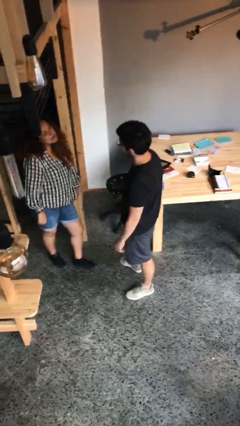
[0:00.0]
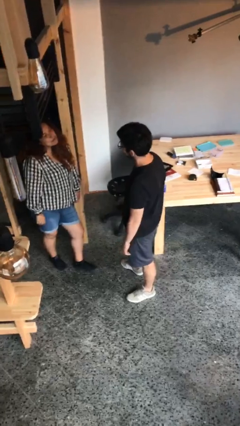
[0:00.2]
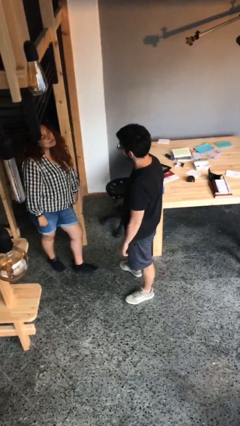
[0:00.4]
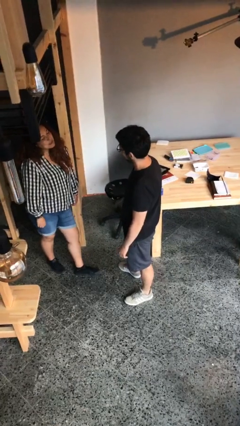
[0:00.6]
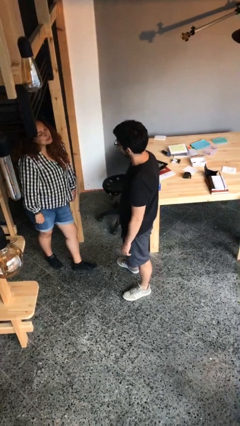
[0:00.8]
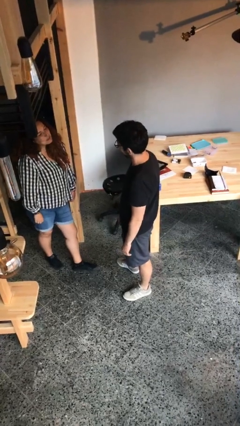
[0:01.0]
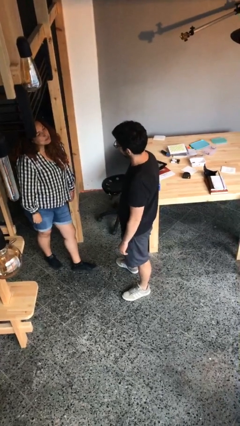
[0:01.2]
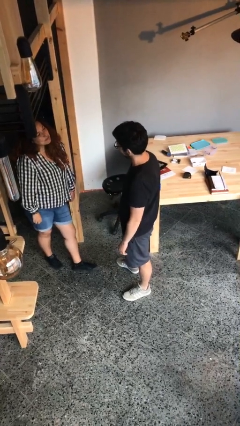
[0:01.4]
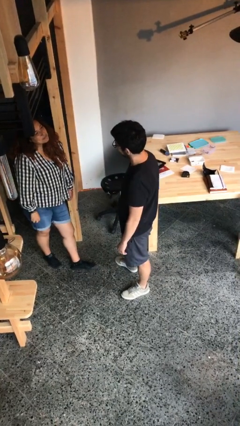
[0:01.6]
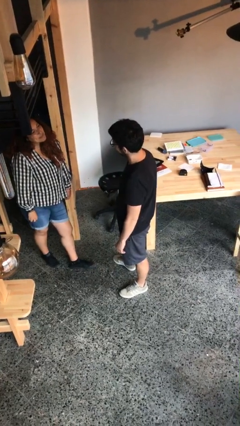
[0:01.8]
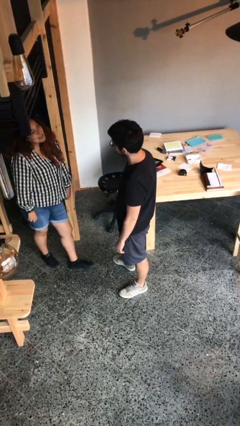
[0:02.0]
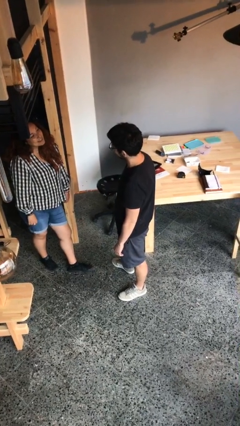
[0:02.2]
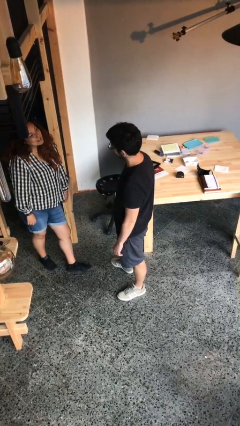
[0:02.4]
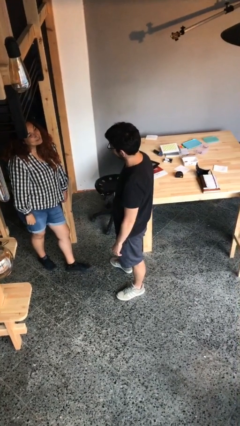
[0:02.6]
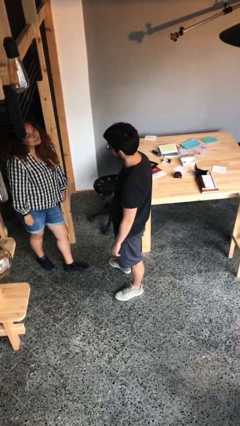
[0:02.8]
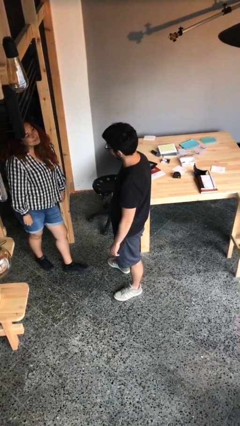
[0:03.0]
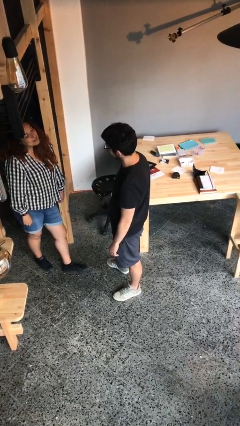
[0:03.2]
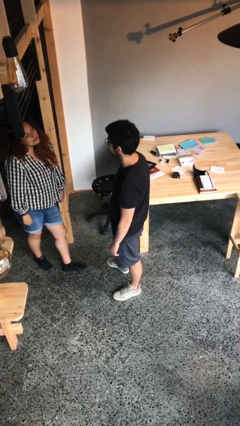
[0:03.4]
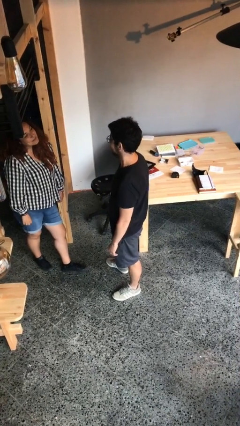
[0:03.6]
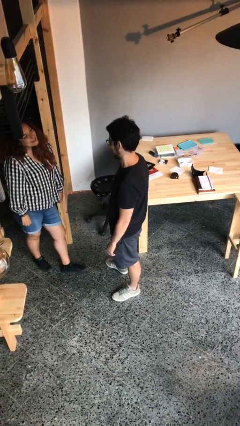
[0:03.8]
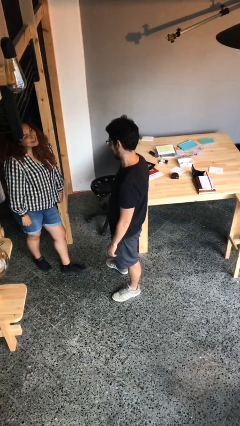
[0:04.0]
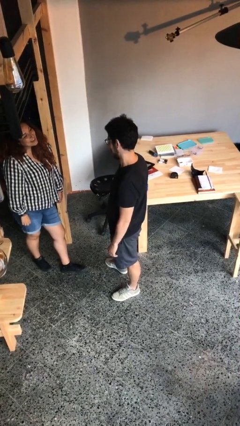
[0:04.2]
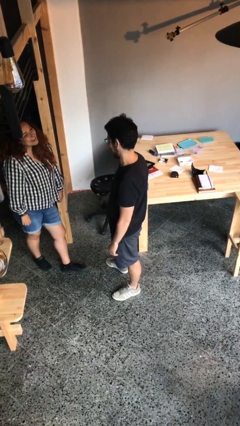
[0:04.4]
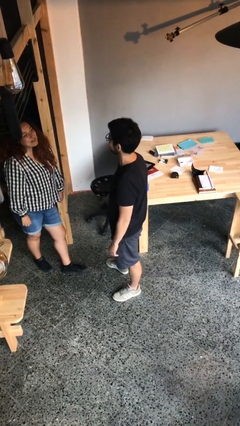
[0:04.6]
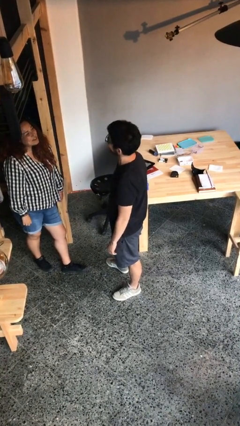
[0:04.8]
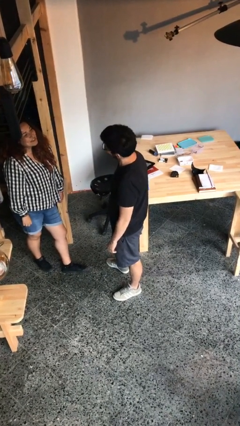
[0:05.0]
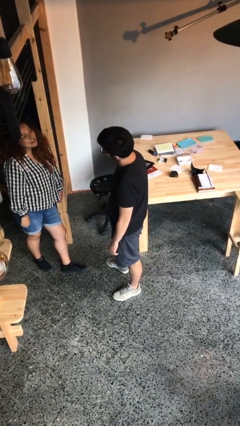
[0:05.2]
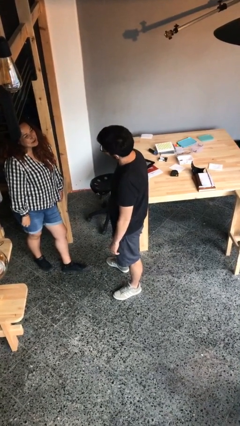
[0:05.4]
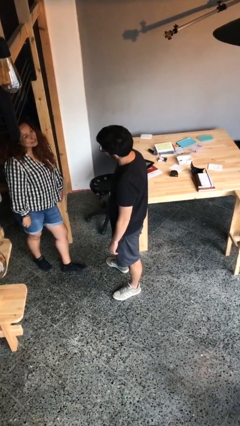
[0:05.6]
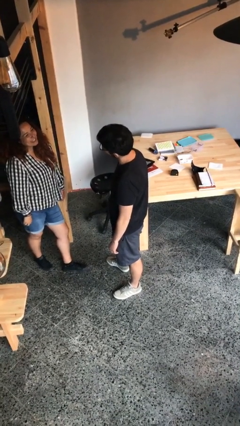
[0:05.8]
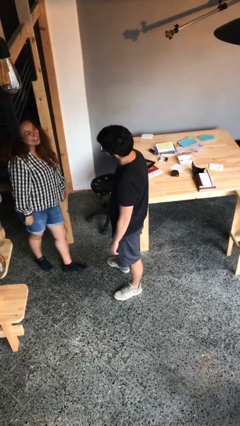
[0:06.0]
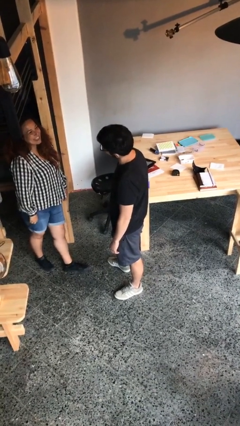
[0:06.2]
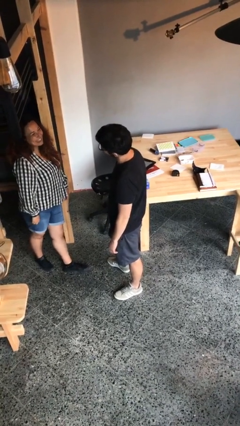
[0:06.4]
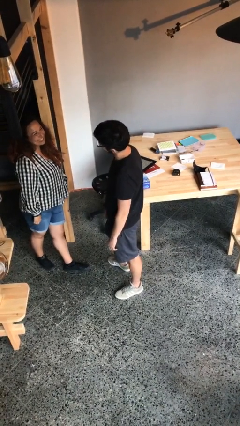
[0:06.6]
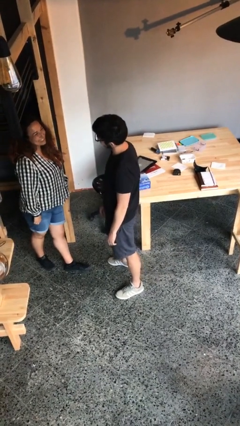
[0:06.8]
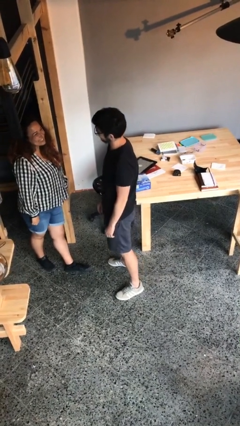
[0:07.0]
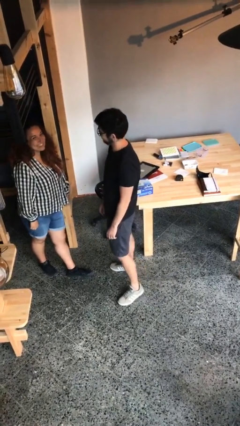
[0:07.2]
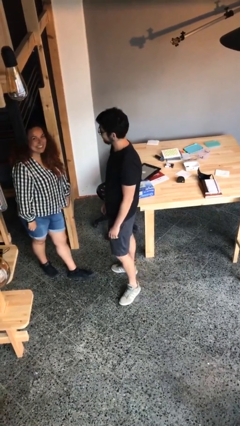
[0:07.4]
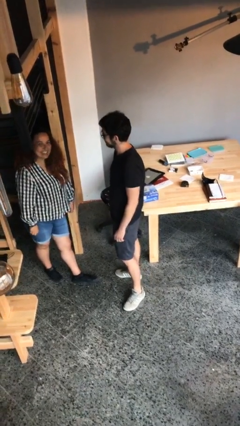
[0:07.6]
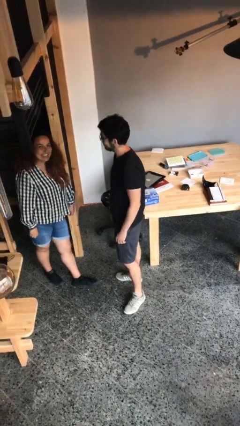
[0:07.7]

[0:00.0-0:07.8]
person talks to person

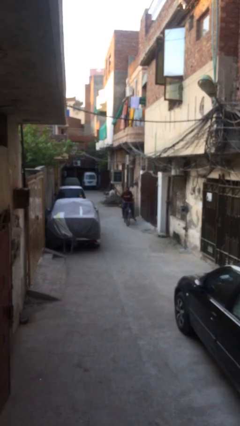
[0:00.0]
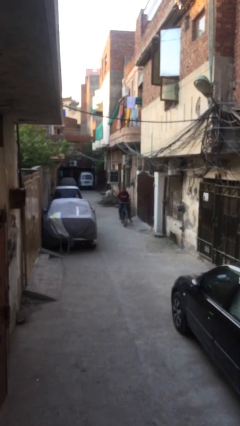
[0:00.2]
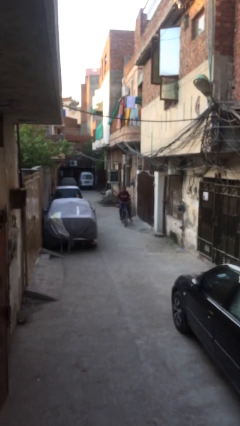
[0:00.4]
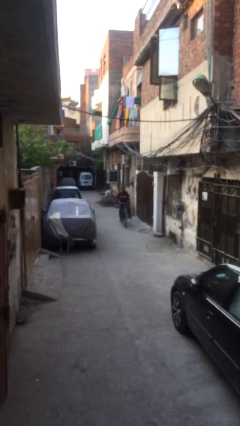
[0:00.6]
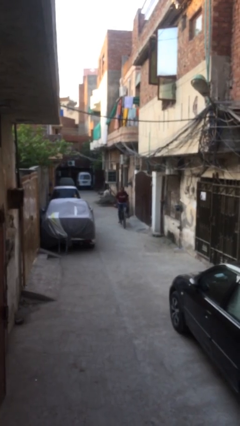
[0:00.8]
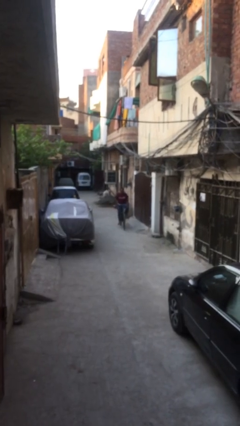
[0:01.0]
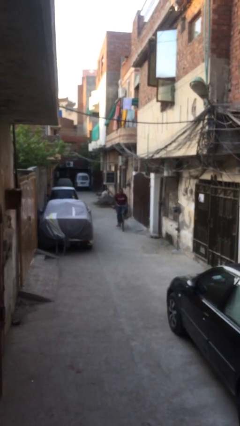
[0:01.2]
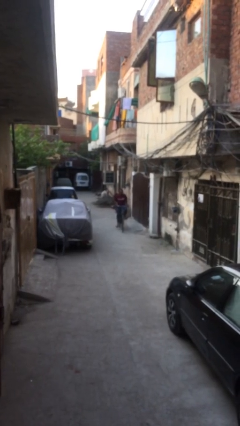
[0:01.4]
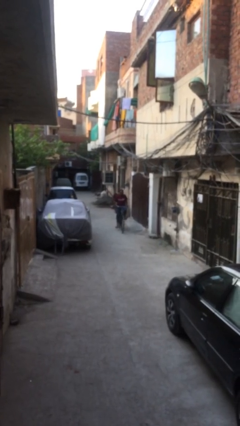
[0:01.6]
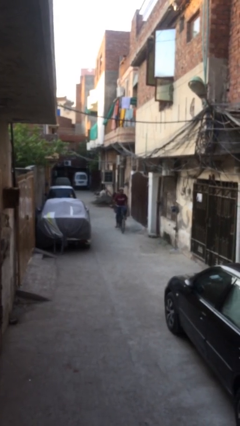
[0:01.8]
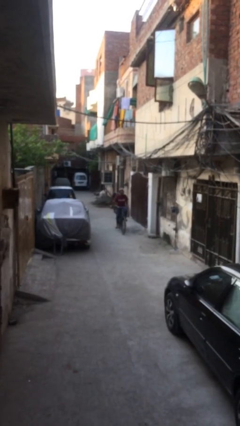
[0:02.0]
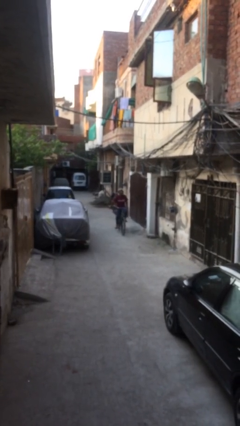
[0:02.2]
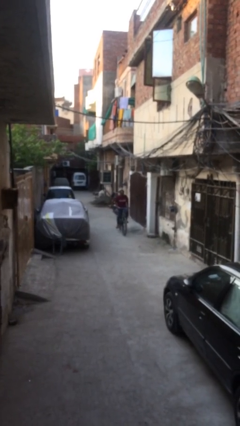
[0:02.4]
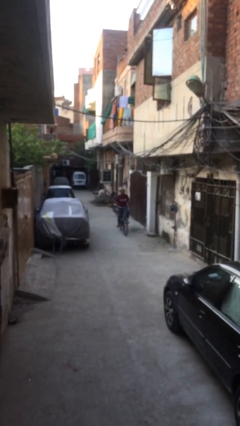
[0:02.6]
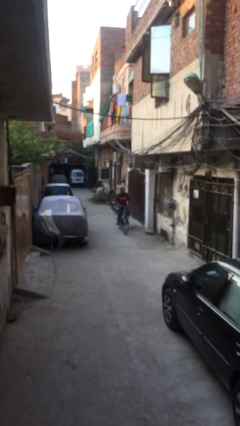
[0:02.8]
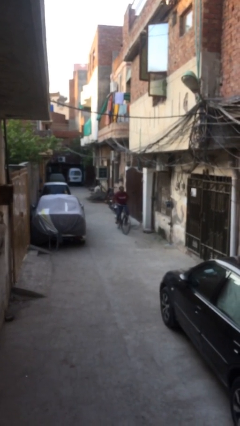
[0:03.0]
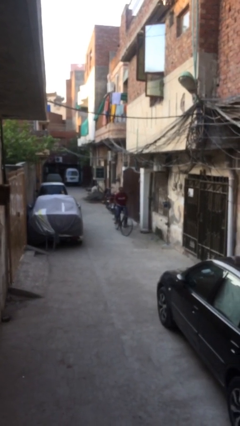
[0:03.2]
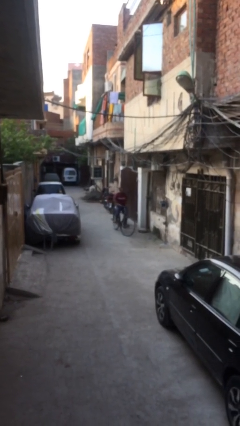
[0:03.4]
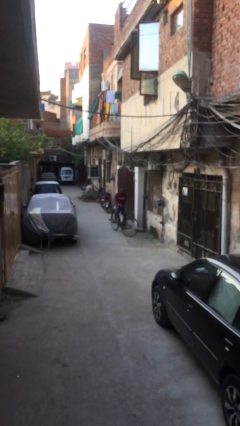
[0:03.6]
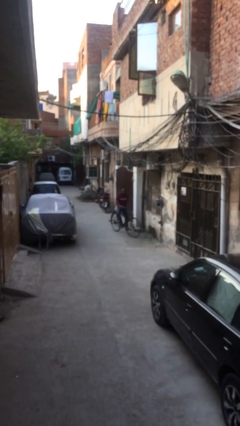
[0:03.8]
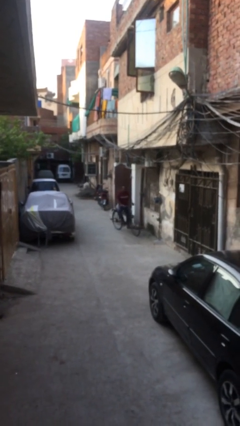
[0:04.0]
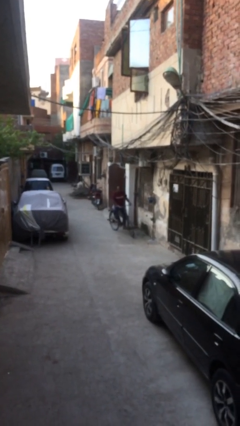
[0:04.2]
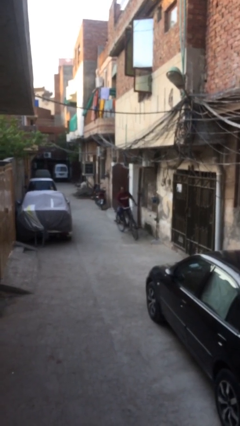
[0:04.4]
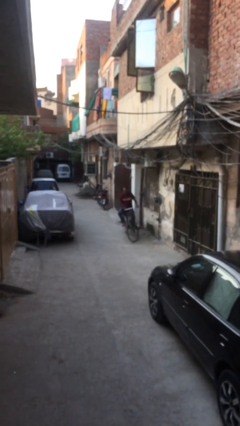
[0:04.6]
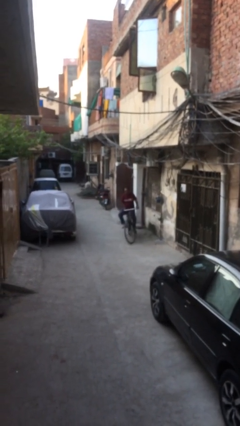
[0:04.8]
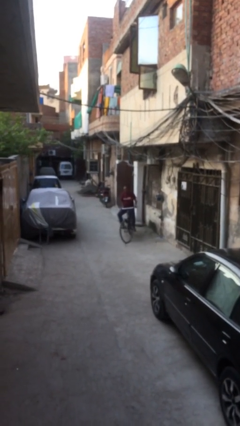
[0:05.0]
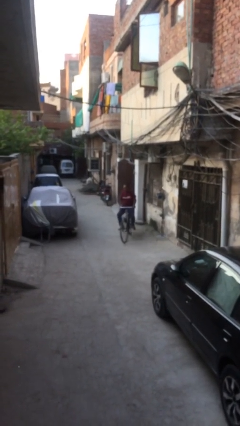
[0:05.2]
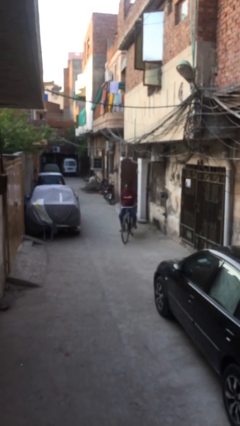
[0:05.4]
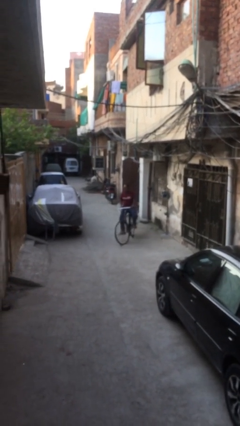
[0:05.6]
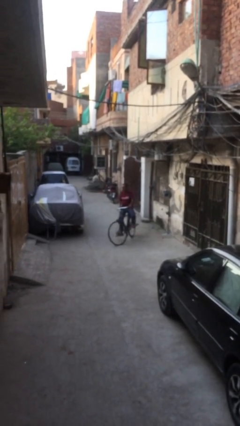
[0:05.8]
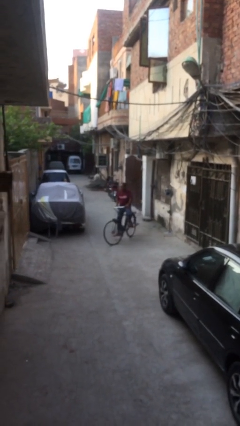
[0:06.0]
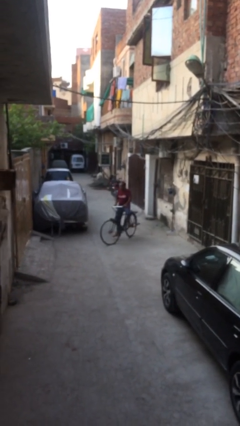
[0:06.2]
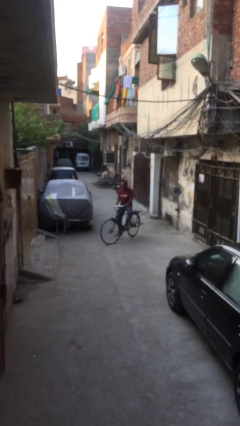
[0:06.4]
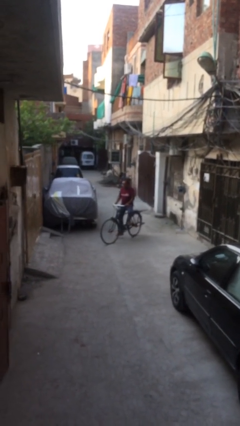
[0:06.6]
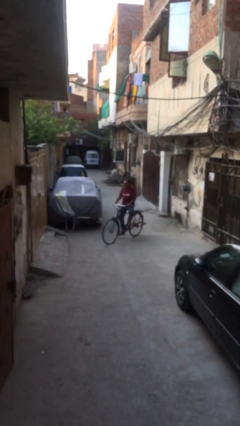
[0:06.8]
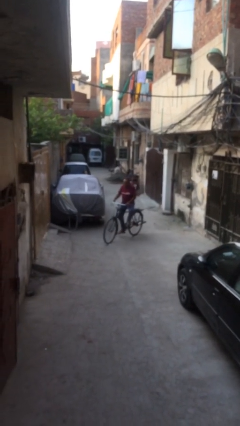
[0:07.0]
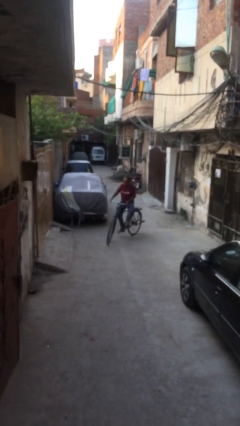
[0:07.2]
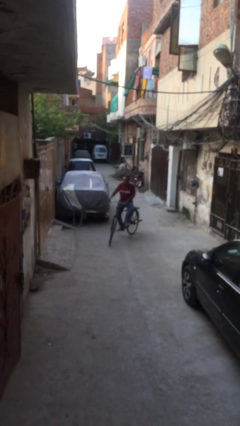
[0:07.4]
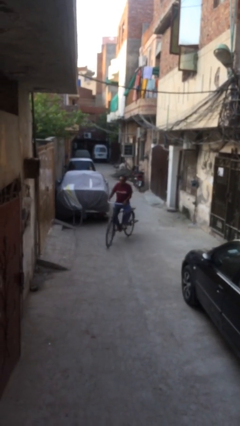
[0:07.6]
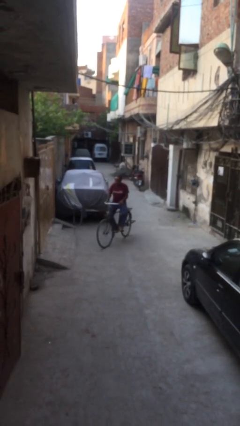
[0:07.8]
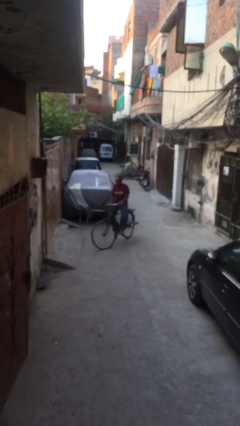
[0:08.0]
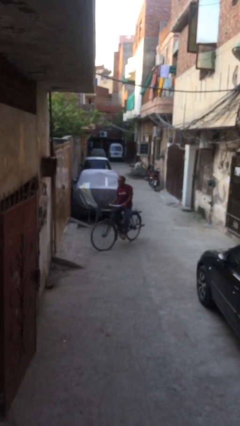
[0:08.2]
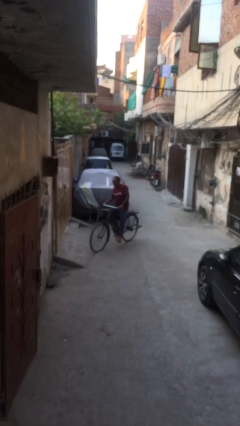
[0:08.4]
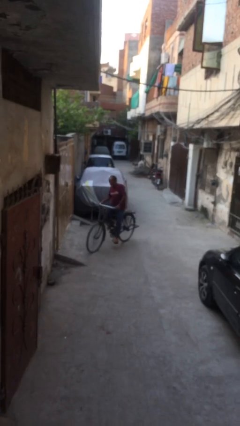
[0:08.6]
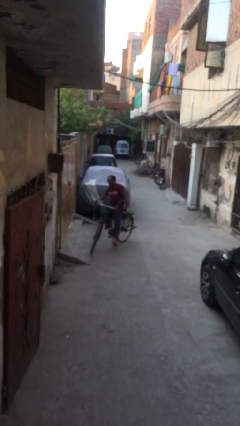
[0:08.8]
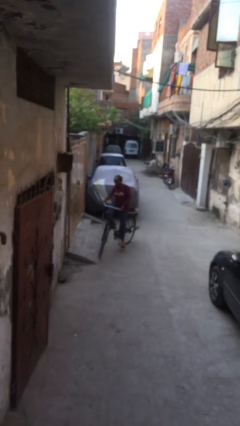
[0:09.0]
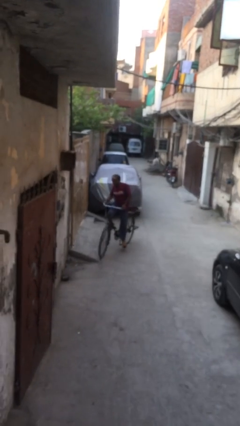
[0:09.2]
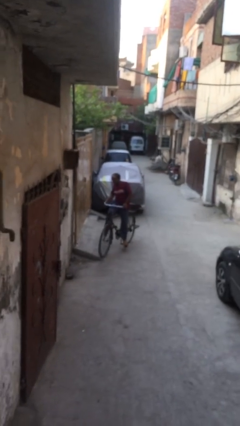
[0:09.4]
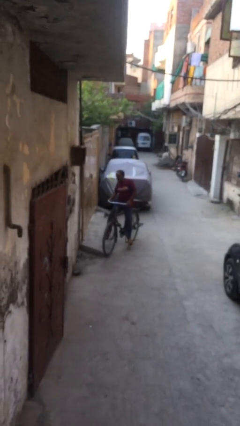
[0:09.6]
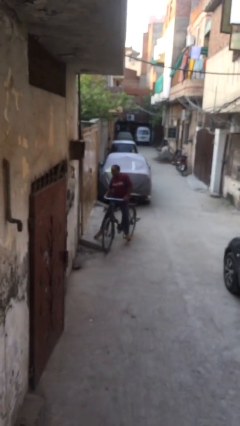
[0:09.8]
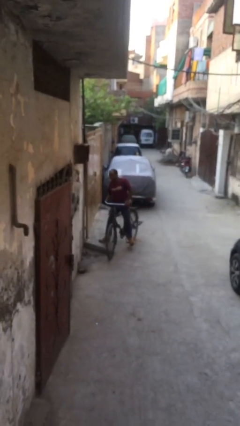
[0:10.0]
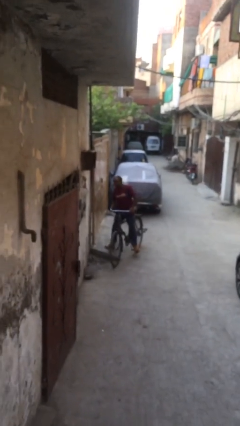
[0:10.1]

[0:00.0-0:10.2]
person rides bicycle
